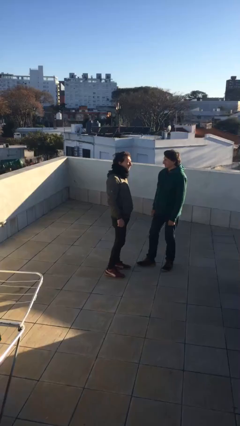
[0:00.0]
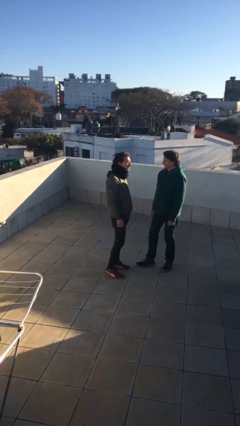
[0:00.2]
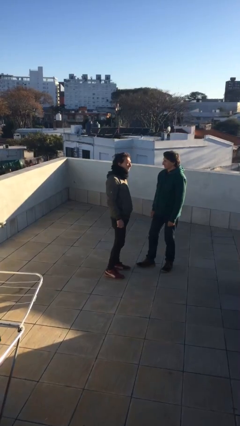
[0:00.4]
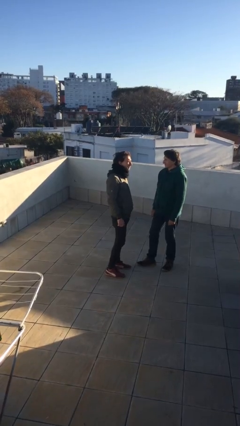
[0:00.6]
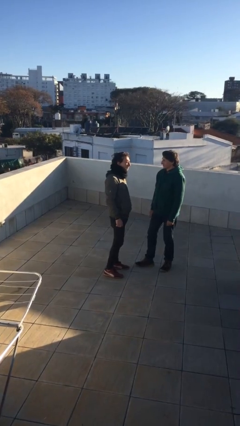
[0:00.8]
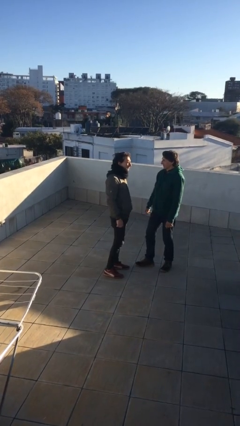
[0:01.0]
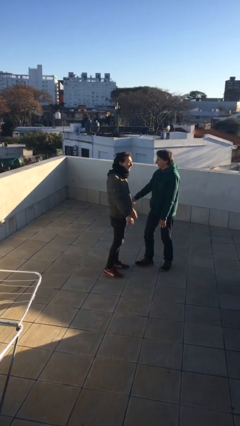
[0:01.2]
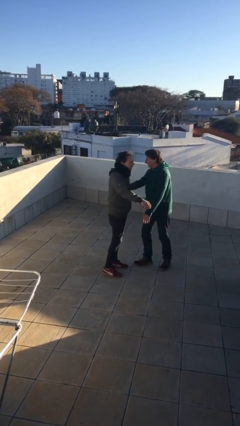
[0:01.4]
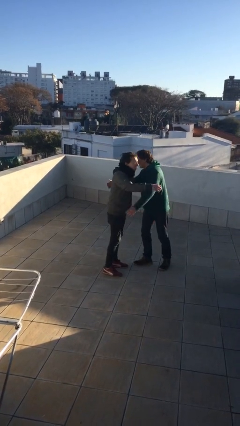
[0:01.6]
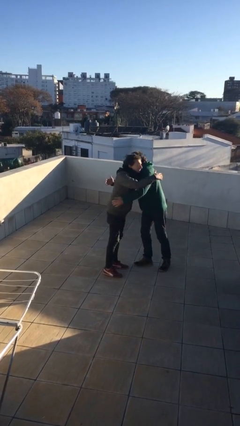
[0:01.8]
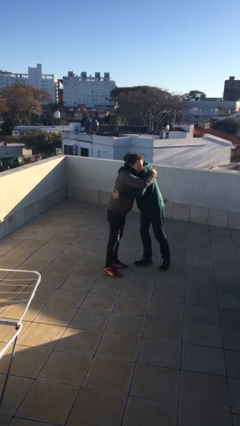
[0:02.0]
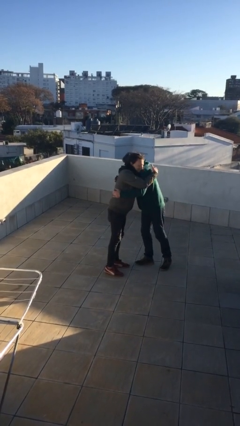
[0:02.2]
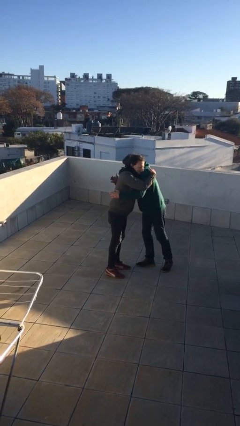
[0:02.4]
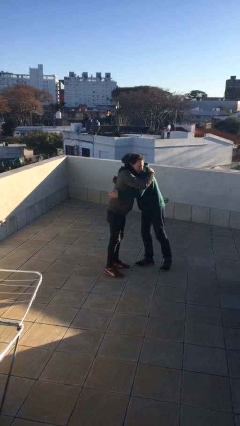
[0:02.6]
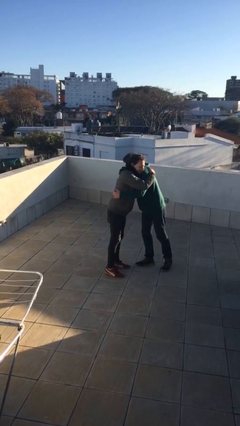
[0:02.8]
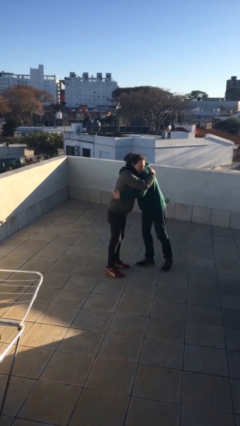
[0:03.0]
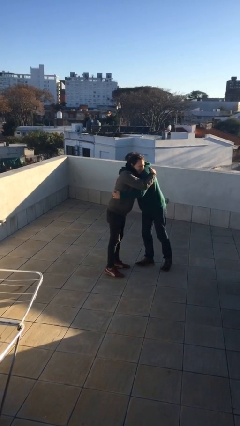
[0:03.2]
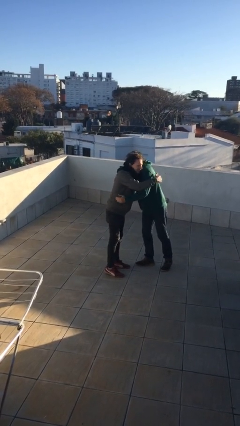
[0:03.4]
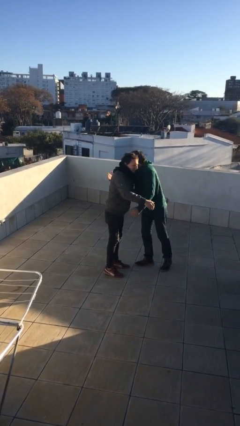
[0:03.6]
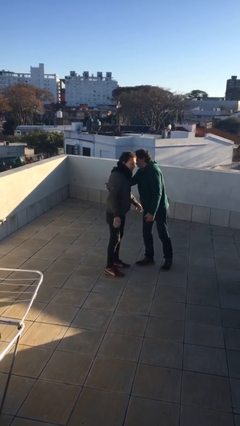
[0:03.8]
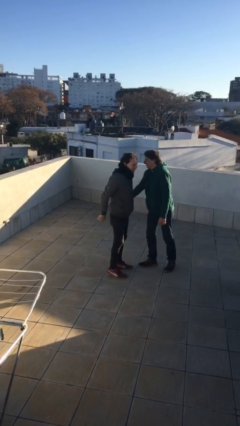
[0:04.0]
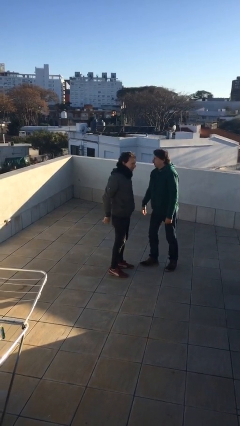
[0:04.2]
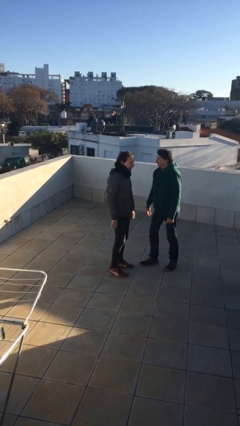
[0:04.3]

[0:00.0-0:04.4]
person embraces person

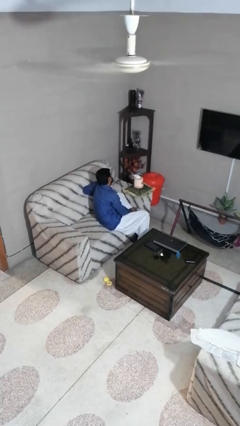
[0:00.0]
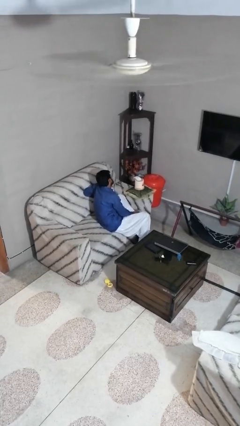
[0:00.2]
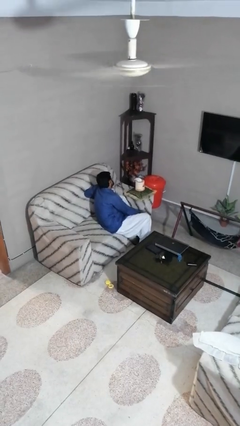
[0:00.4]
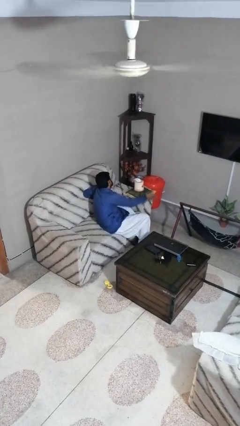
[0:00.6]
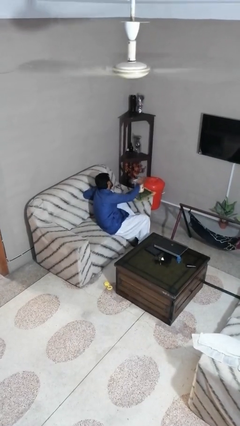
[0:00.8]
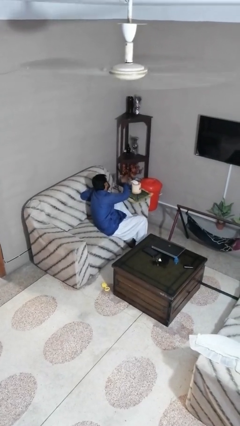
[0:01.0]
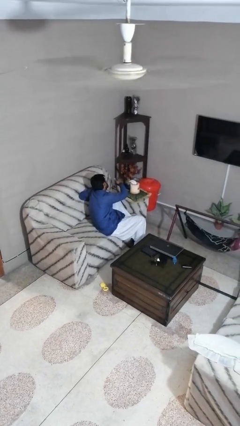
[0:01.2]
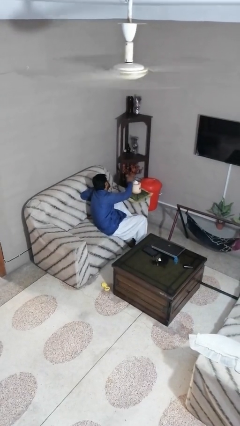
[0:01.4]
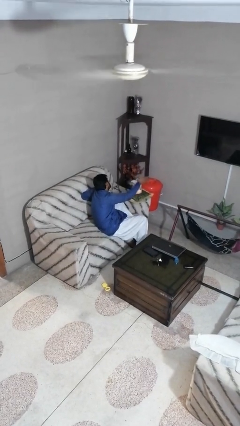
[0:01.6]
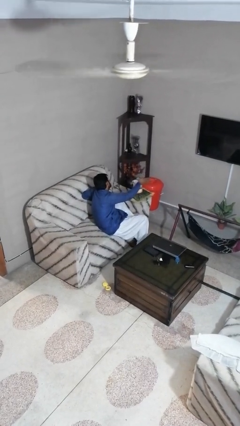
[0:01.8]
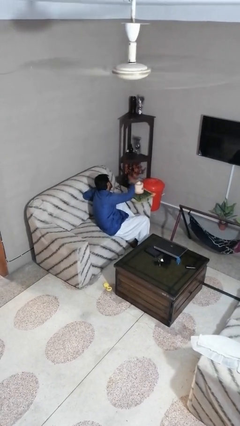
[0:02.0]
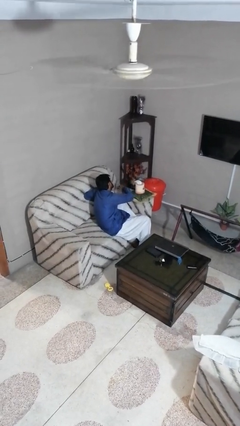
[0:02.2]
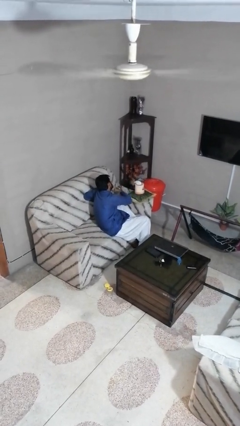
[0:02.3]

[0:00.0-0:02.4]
person waves hand over object

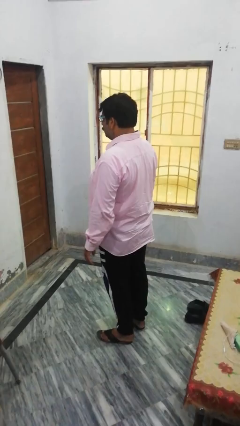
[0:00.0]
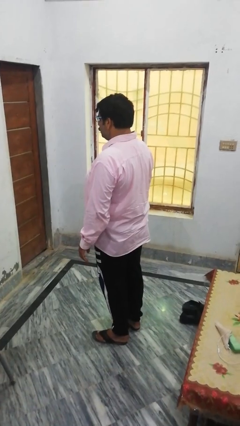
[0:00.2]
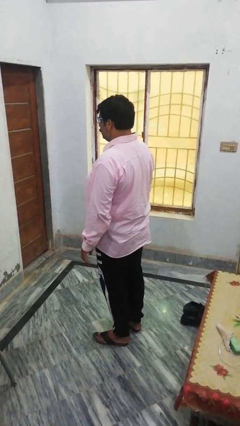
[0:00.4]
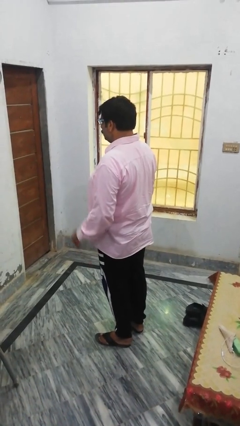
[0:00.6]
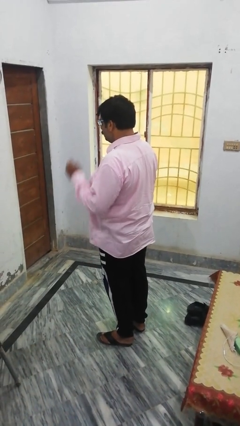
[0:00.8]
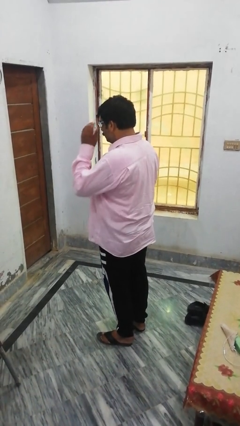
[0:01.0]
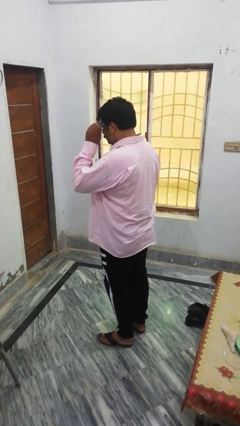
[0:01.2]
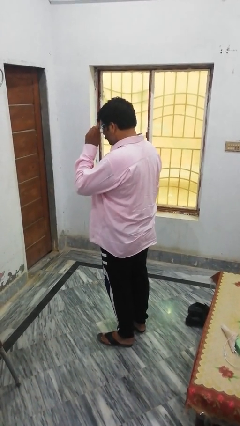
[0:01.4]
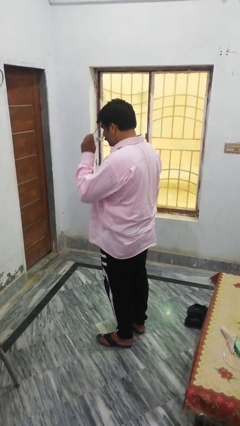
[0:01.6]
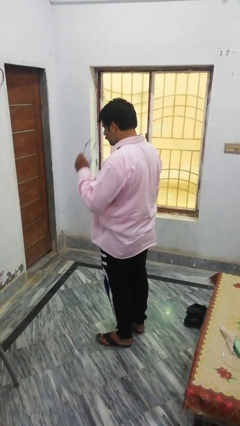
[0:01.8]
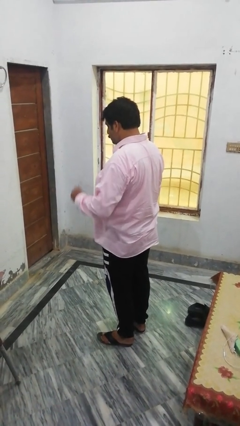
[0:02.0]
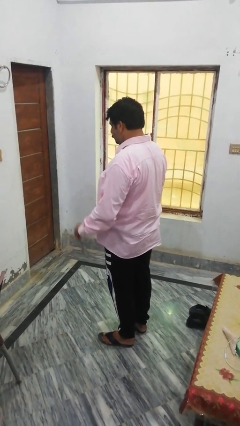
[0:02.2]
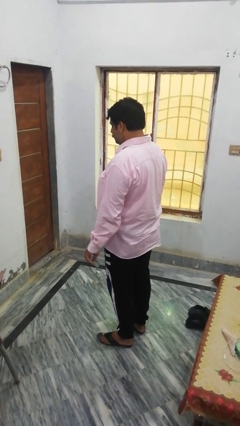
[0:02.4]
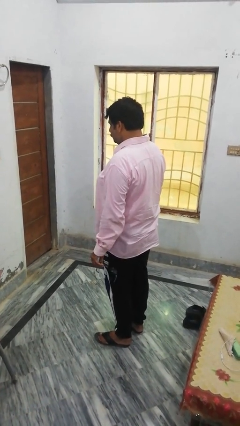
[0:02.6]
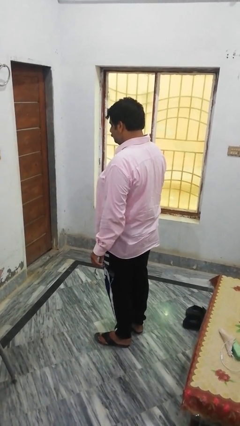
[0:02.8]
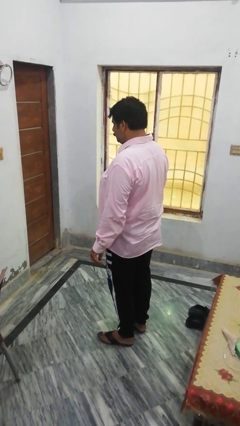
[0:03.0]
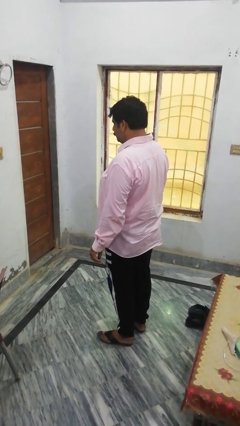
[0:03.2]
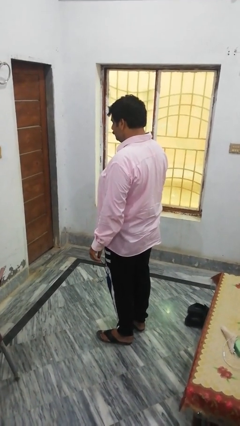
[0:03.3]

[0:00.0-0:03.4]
person takes off glasses

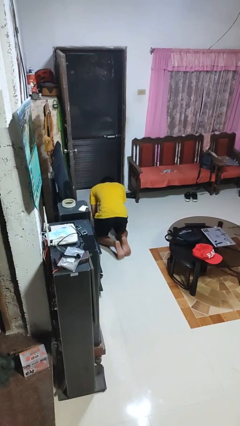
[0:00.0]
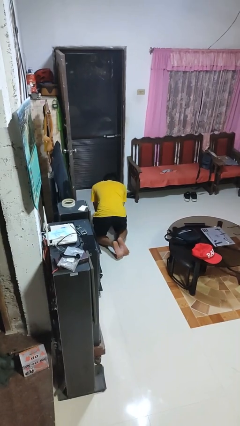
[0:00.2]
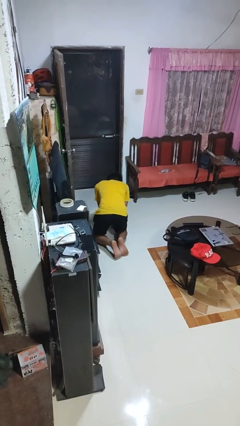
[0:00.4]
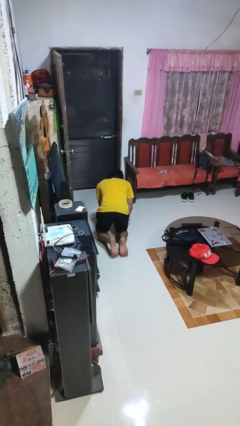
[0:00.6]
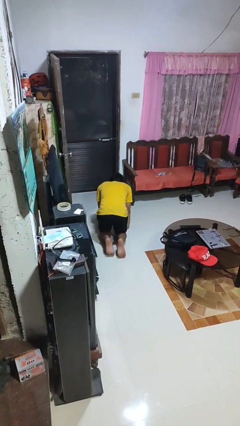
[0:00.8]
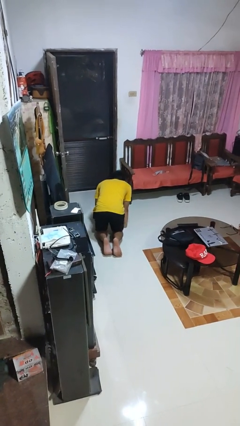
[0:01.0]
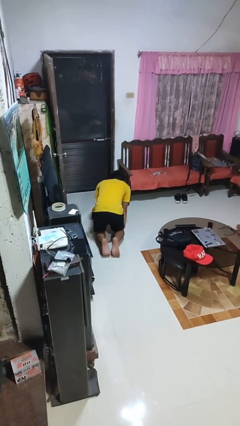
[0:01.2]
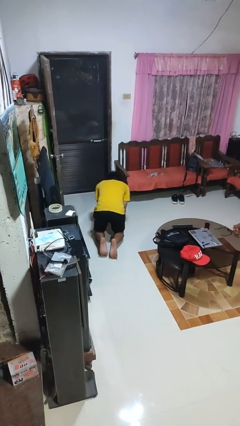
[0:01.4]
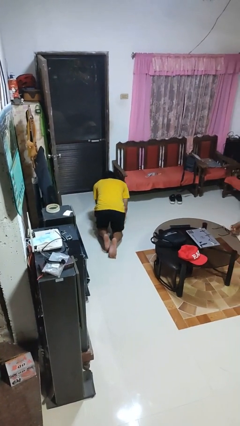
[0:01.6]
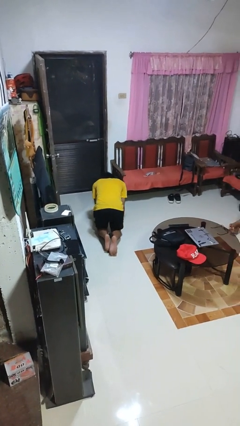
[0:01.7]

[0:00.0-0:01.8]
person crawls

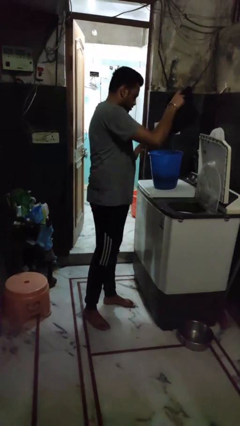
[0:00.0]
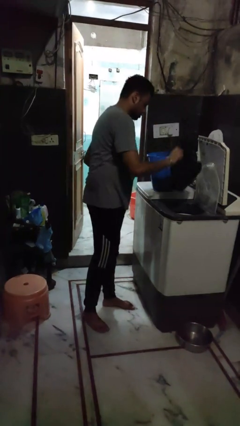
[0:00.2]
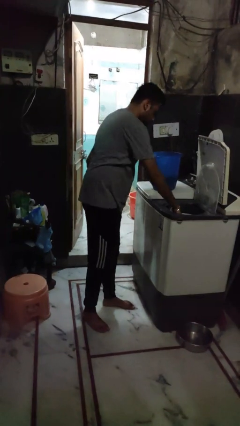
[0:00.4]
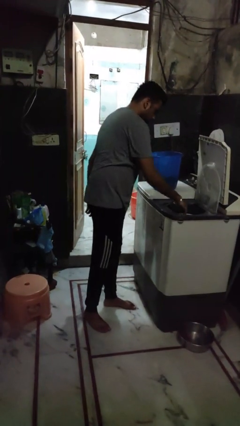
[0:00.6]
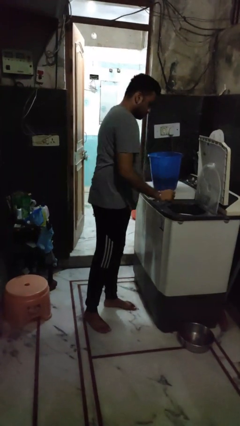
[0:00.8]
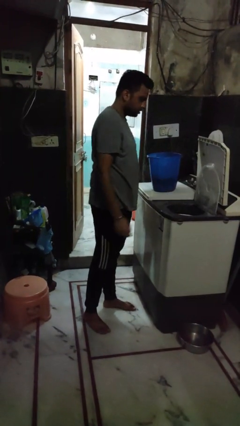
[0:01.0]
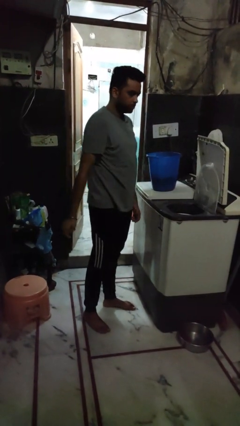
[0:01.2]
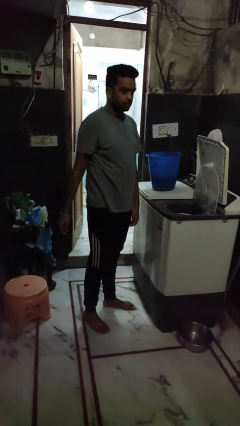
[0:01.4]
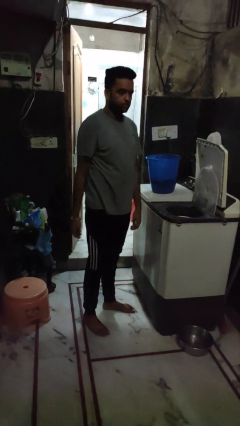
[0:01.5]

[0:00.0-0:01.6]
person loads dryer

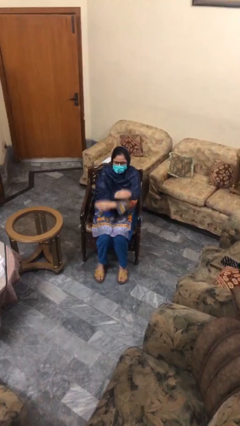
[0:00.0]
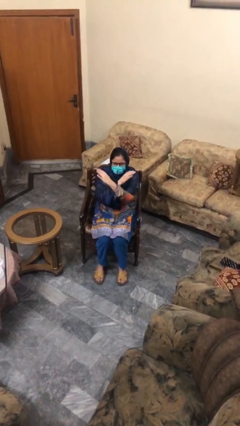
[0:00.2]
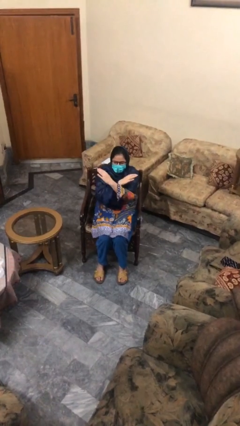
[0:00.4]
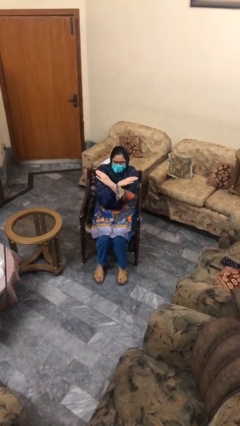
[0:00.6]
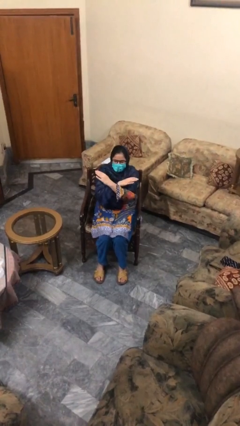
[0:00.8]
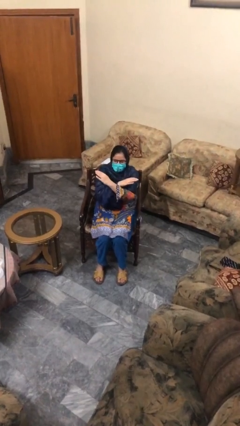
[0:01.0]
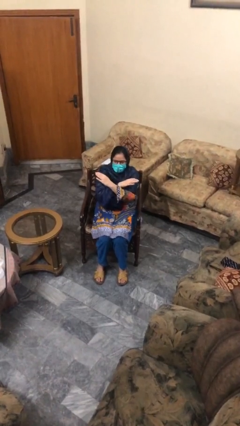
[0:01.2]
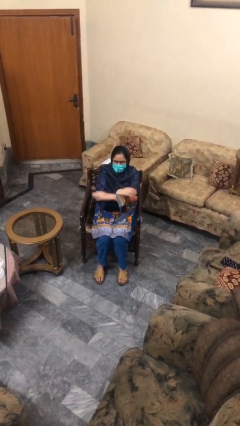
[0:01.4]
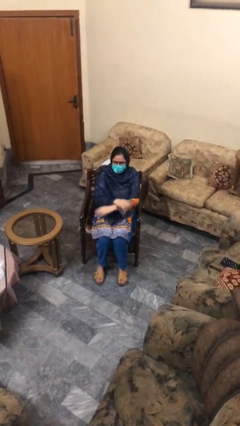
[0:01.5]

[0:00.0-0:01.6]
person gestures arms x

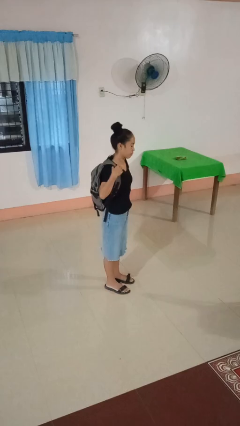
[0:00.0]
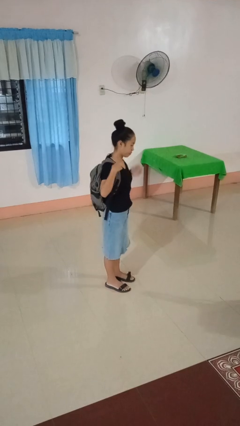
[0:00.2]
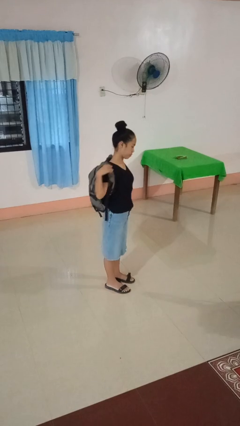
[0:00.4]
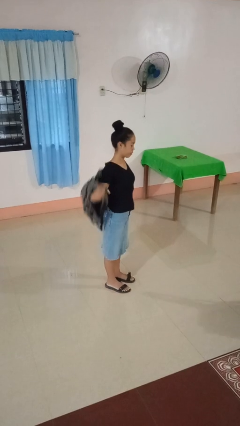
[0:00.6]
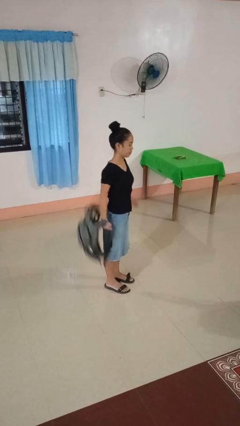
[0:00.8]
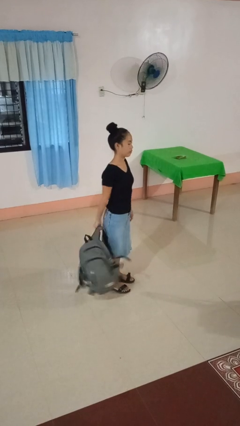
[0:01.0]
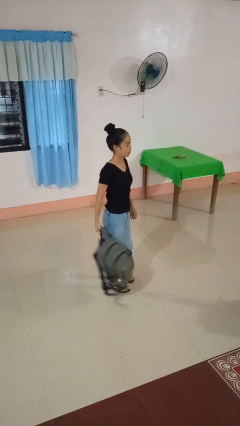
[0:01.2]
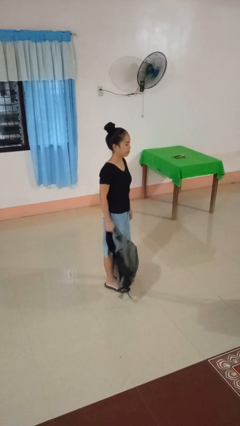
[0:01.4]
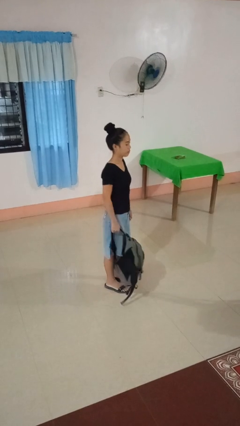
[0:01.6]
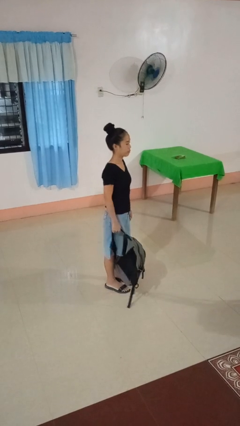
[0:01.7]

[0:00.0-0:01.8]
person takes off backpack
